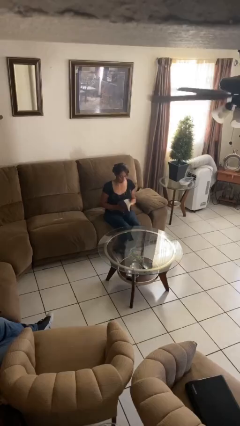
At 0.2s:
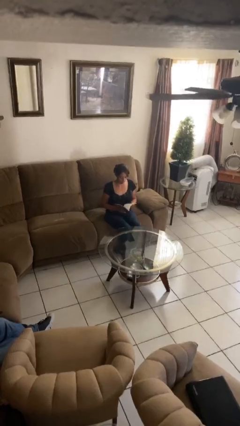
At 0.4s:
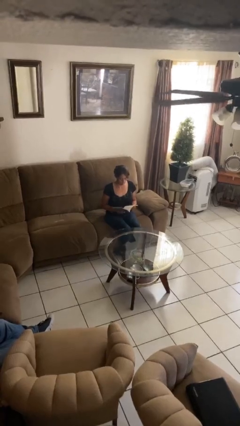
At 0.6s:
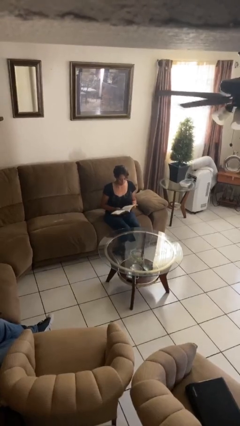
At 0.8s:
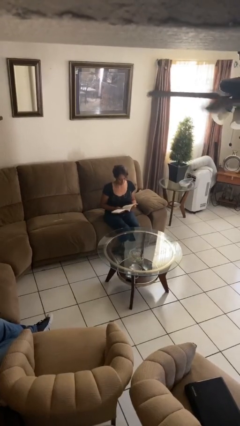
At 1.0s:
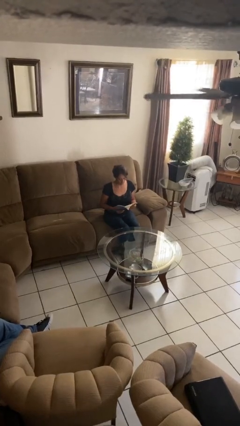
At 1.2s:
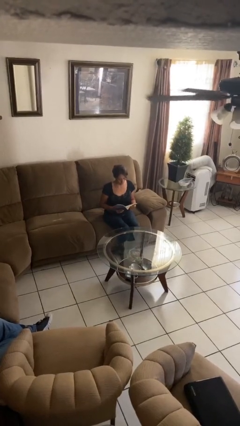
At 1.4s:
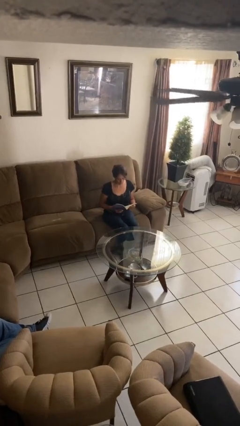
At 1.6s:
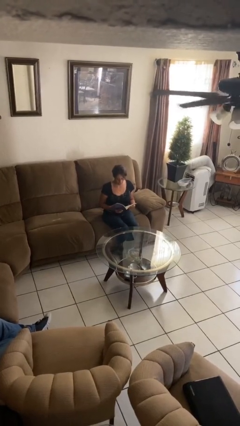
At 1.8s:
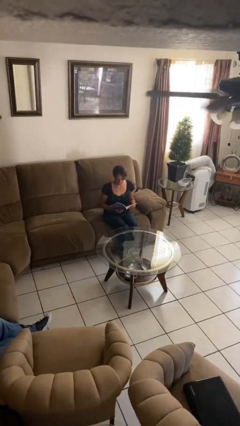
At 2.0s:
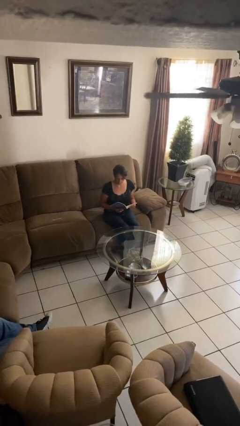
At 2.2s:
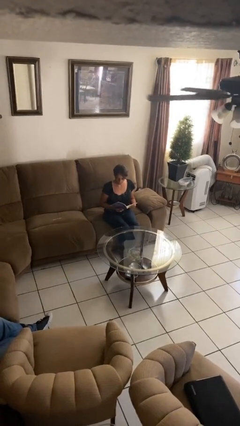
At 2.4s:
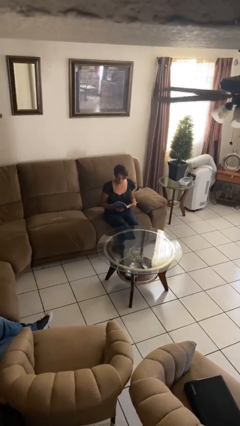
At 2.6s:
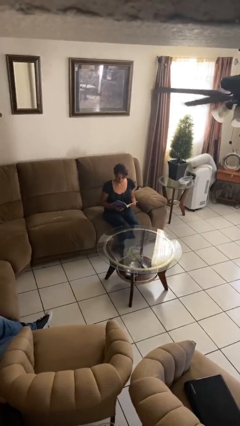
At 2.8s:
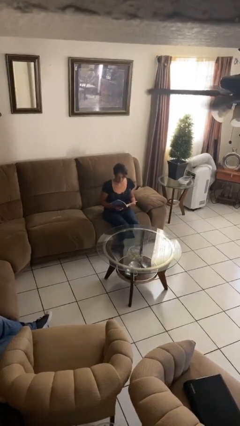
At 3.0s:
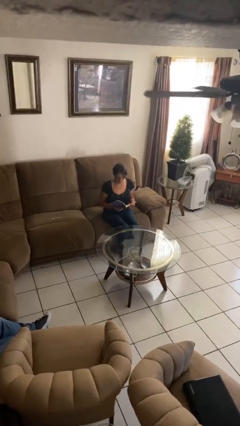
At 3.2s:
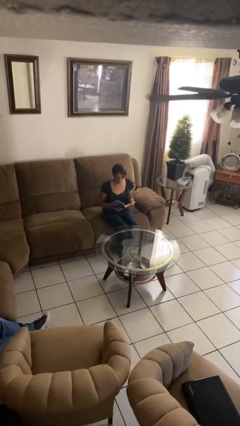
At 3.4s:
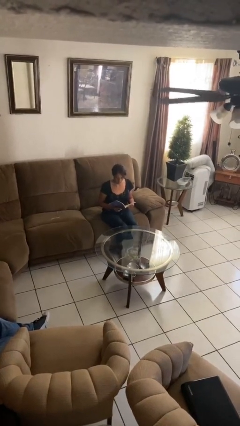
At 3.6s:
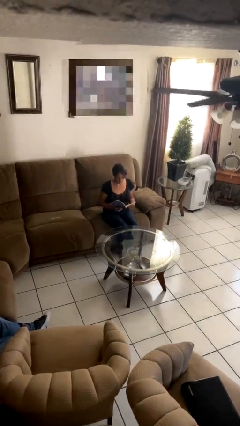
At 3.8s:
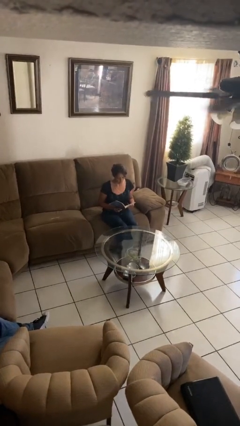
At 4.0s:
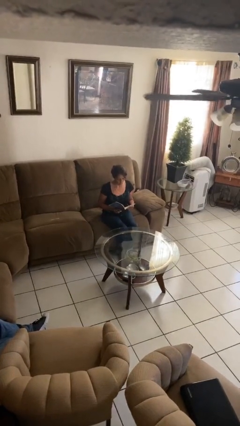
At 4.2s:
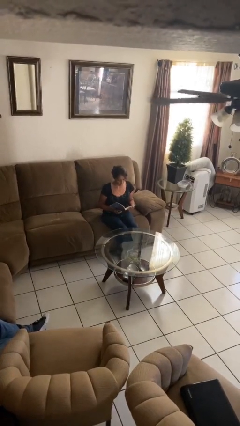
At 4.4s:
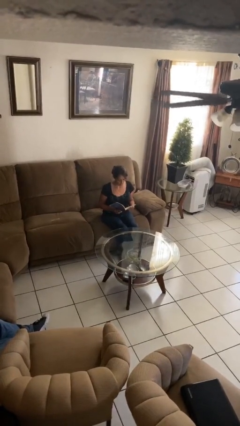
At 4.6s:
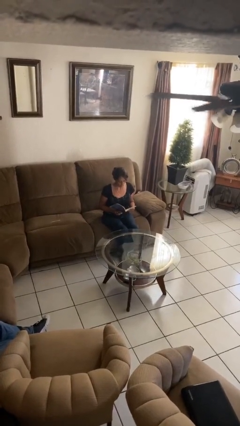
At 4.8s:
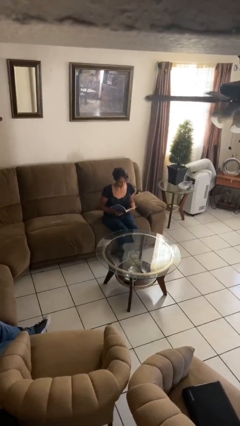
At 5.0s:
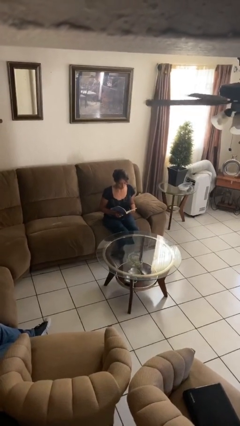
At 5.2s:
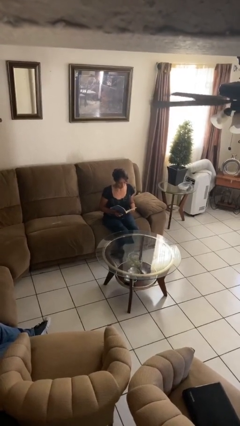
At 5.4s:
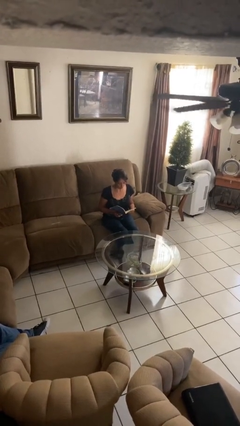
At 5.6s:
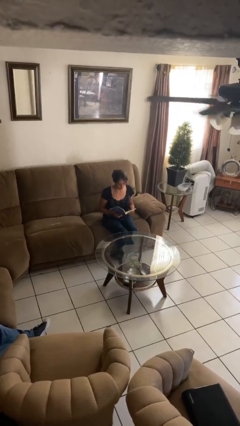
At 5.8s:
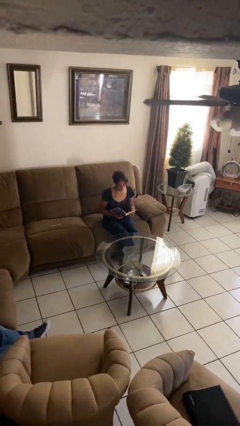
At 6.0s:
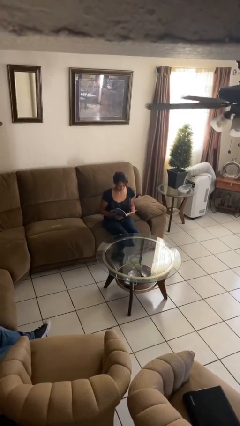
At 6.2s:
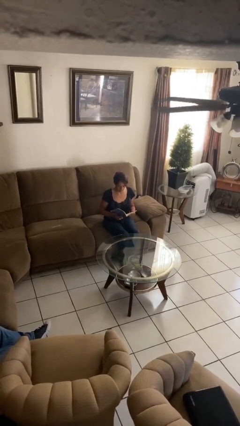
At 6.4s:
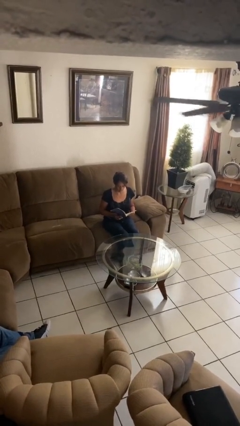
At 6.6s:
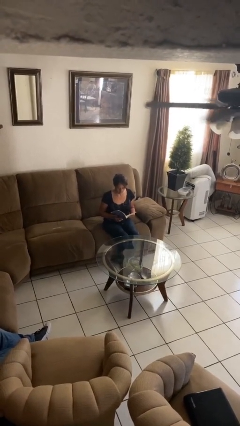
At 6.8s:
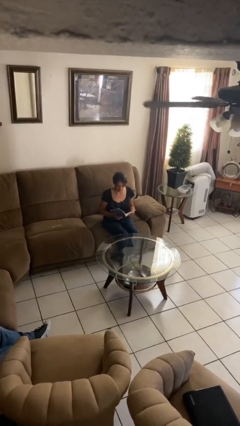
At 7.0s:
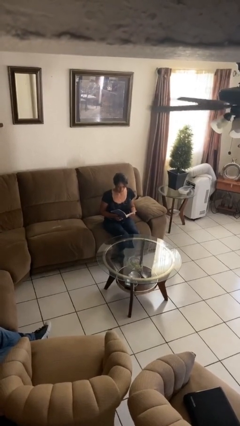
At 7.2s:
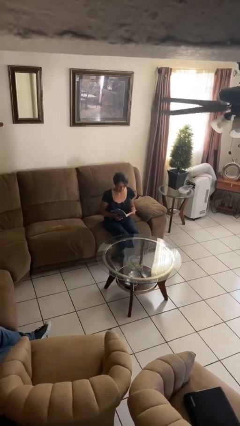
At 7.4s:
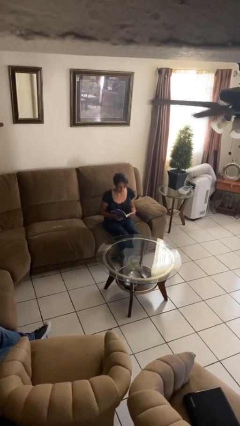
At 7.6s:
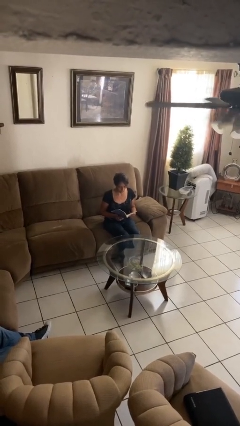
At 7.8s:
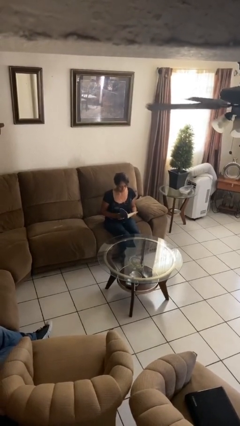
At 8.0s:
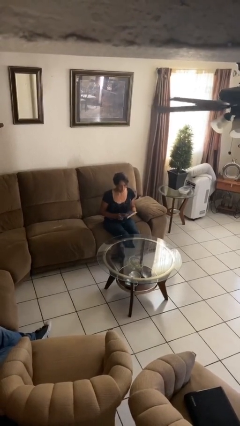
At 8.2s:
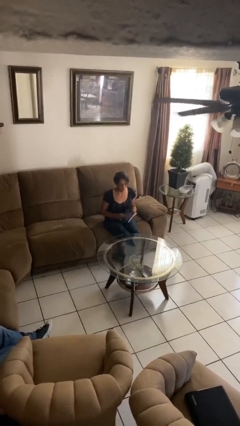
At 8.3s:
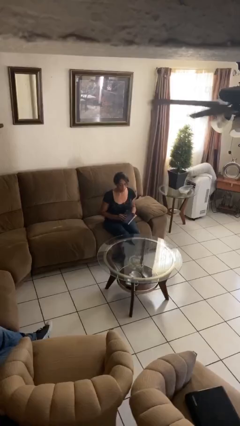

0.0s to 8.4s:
person reads document

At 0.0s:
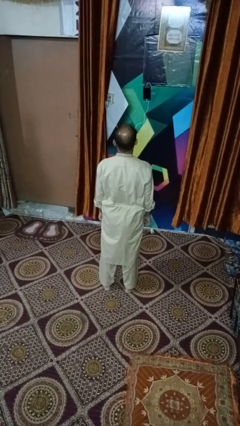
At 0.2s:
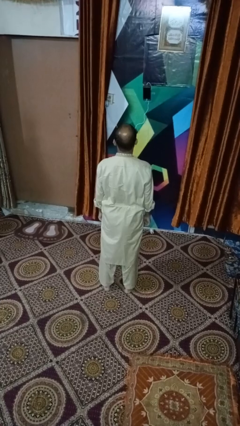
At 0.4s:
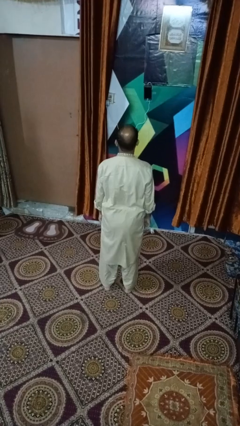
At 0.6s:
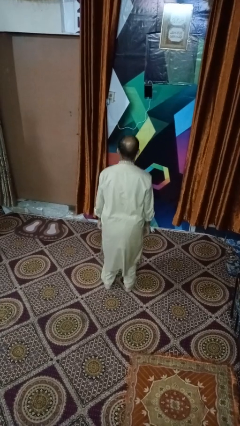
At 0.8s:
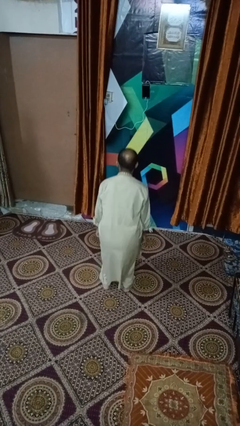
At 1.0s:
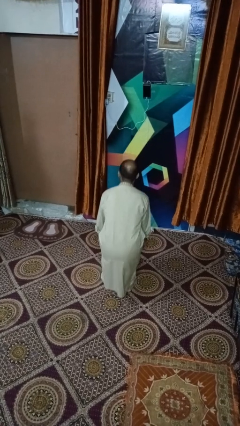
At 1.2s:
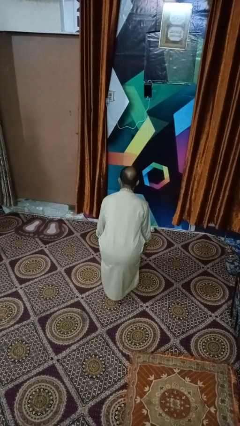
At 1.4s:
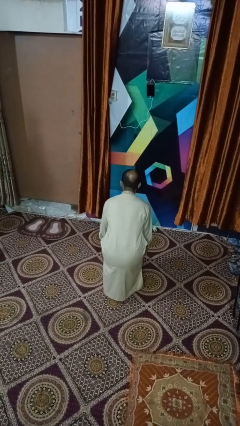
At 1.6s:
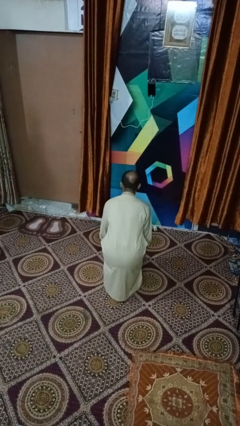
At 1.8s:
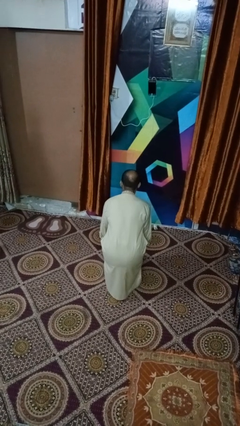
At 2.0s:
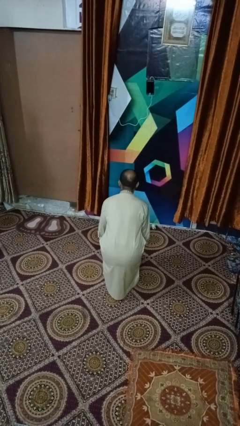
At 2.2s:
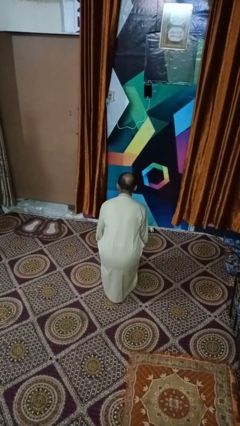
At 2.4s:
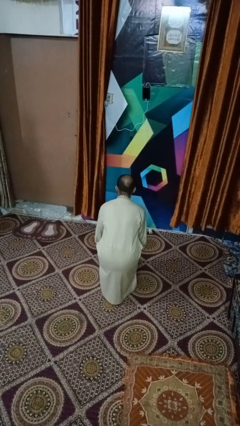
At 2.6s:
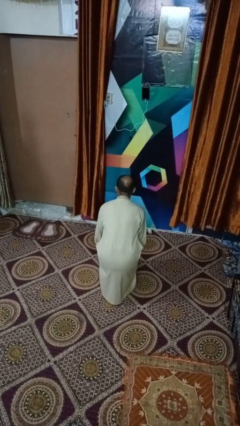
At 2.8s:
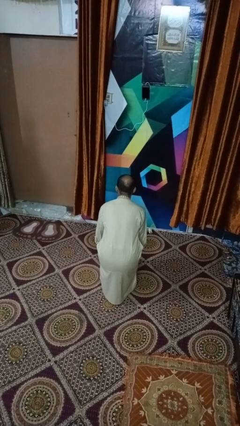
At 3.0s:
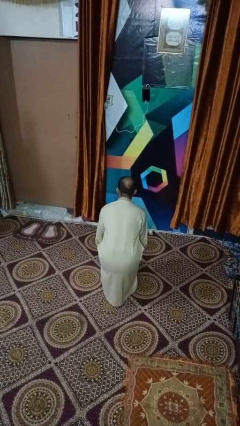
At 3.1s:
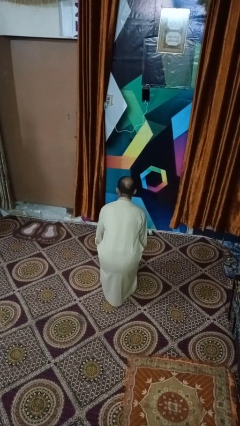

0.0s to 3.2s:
person squats

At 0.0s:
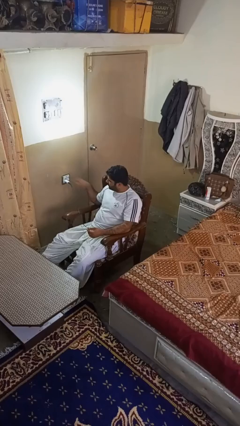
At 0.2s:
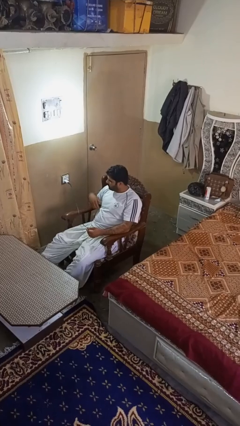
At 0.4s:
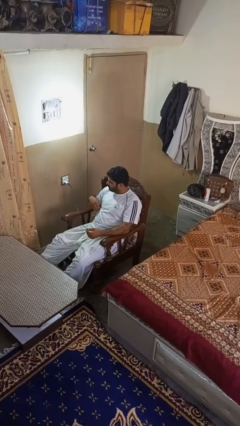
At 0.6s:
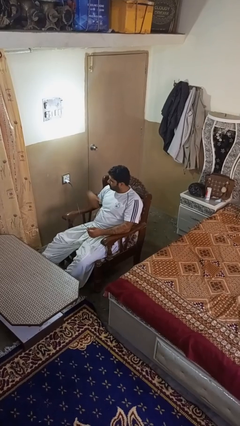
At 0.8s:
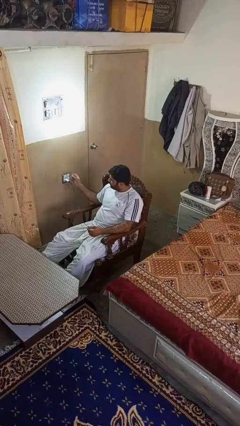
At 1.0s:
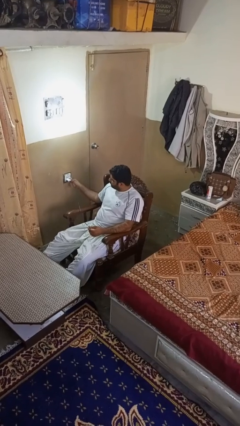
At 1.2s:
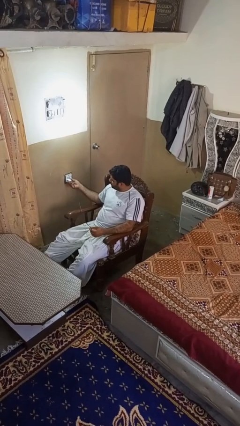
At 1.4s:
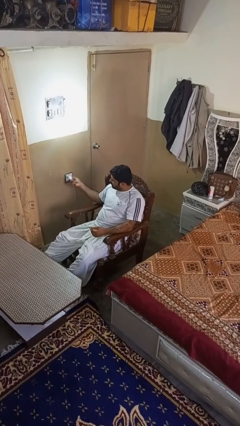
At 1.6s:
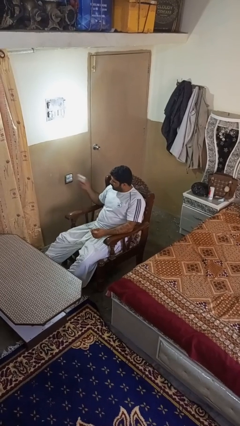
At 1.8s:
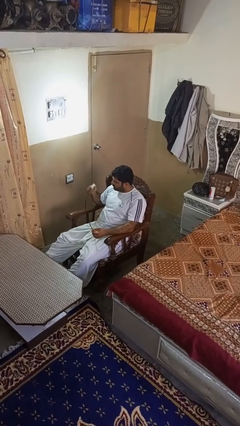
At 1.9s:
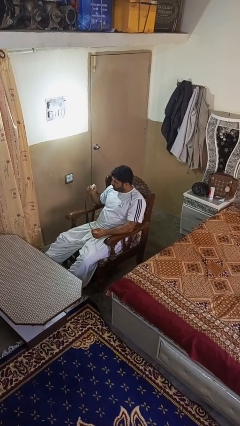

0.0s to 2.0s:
person unplugs from electrical socket

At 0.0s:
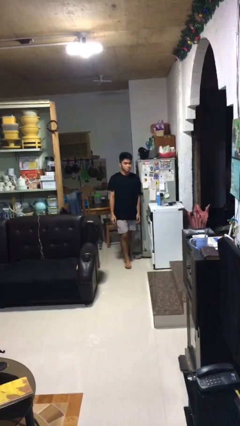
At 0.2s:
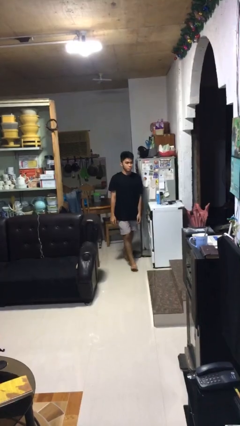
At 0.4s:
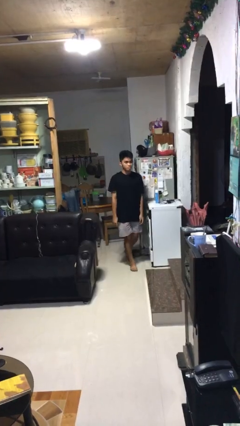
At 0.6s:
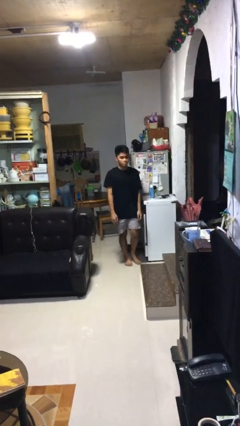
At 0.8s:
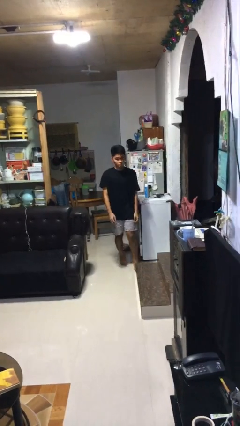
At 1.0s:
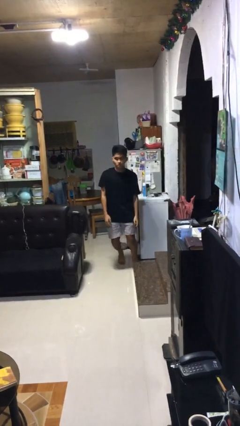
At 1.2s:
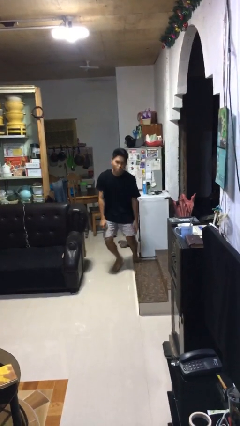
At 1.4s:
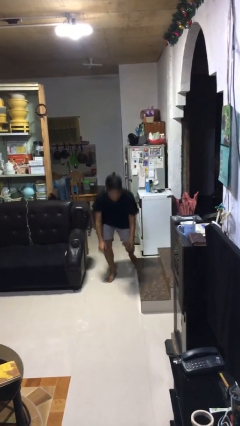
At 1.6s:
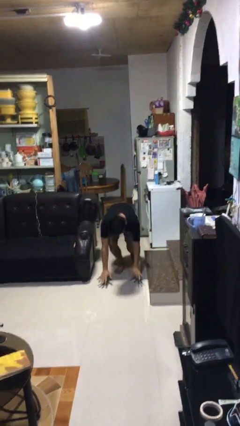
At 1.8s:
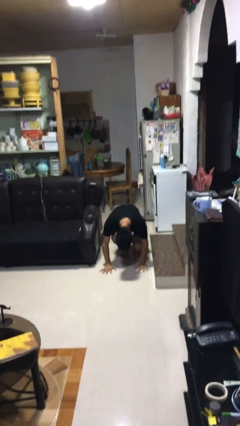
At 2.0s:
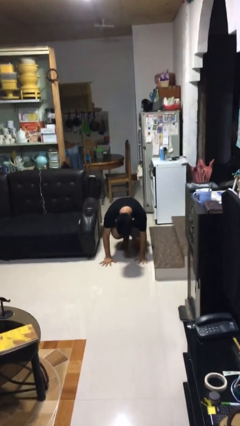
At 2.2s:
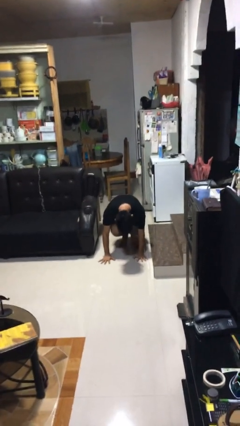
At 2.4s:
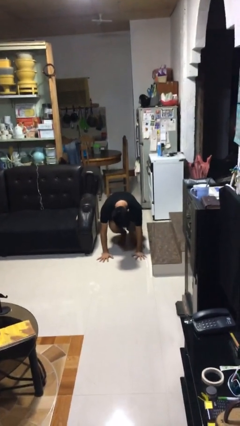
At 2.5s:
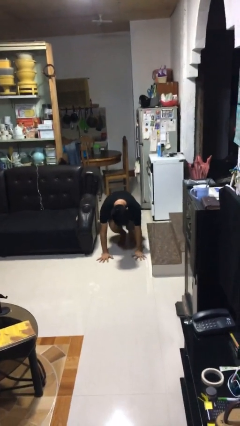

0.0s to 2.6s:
person trips on object on floor

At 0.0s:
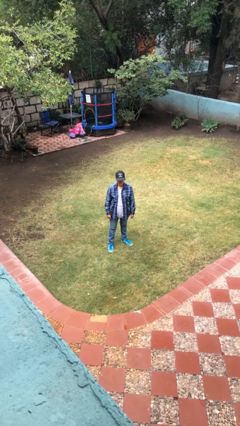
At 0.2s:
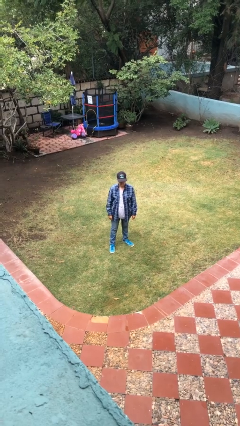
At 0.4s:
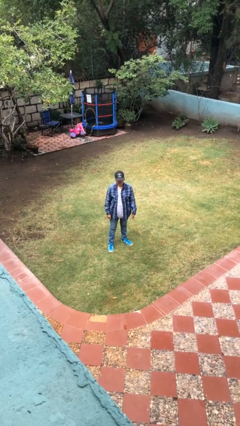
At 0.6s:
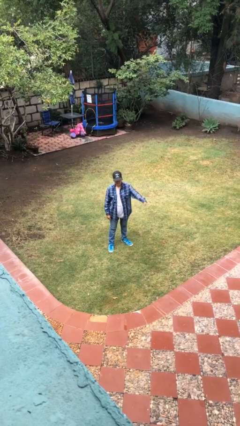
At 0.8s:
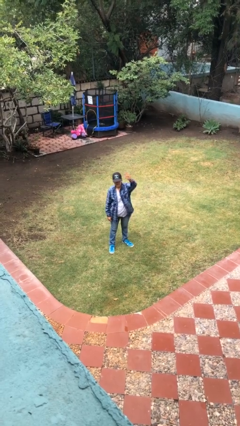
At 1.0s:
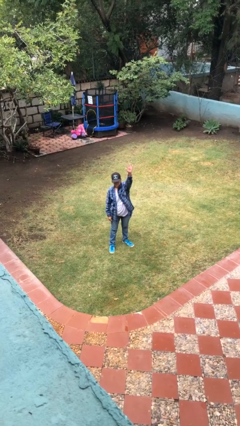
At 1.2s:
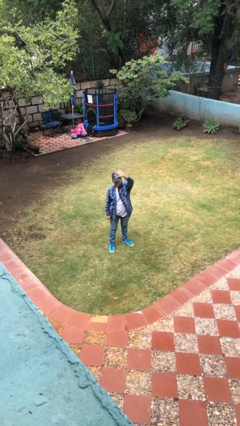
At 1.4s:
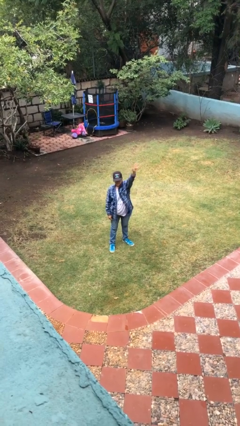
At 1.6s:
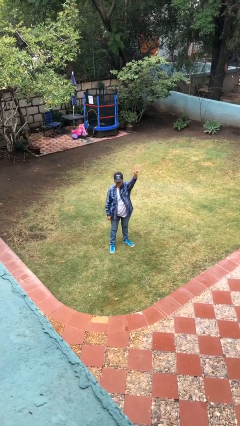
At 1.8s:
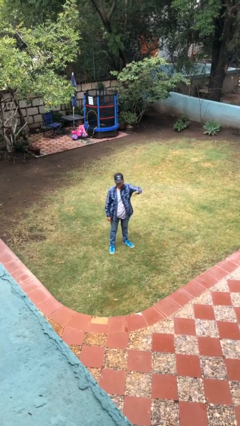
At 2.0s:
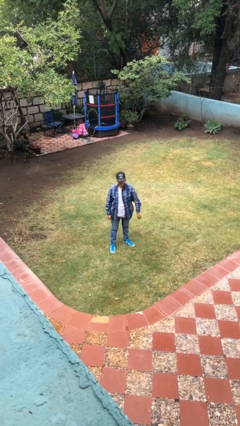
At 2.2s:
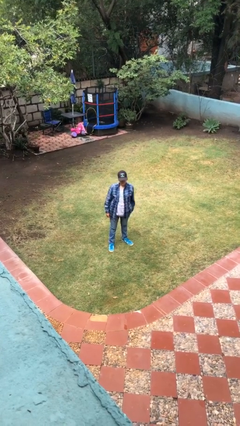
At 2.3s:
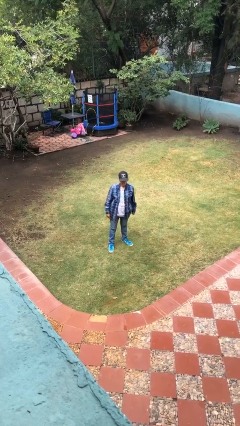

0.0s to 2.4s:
person waves at person
